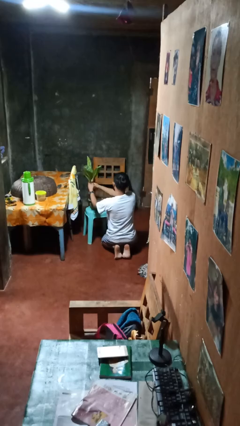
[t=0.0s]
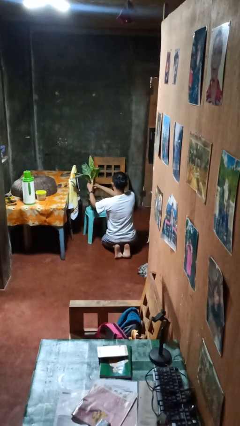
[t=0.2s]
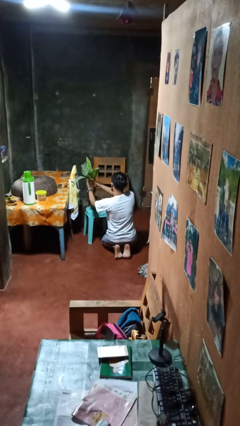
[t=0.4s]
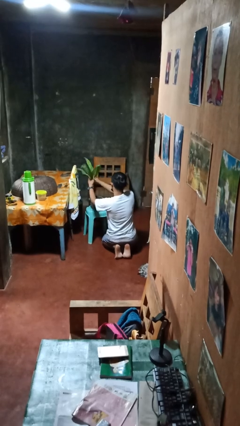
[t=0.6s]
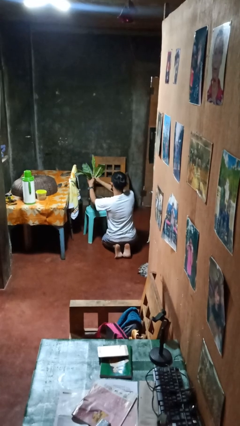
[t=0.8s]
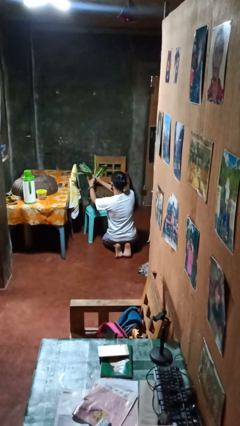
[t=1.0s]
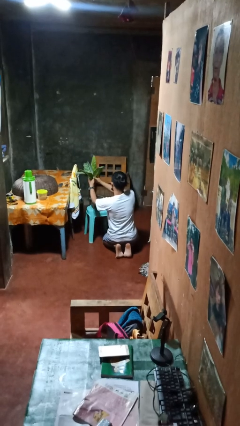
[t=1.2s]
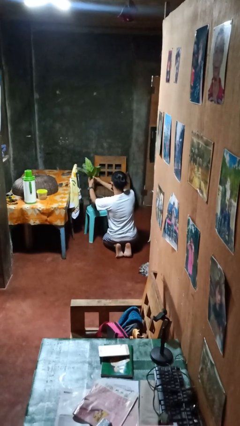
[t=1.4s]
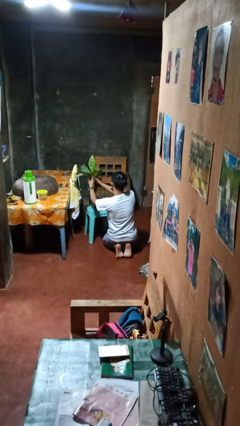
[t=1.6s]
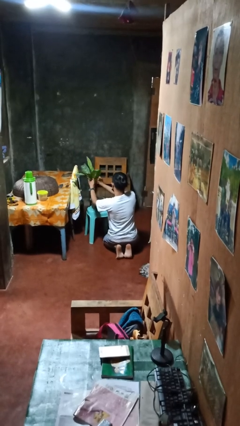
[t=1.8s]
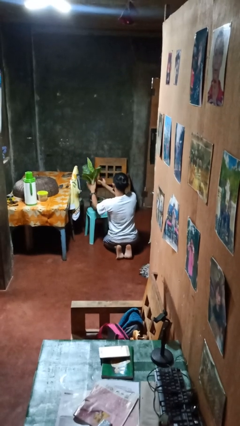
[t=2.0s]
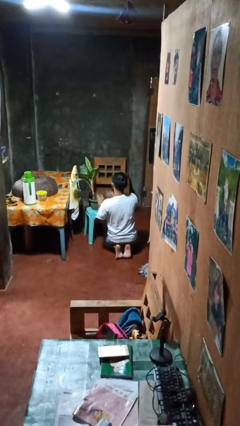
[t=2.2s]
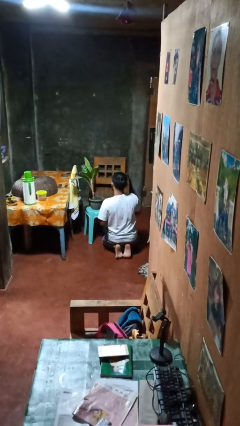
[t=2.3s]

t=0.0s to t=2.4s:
person arranges flowers in vase

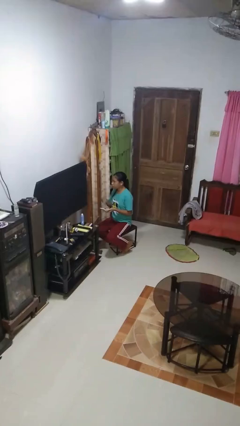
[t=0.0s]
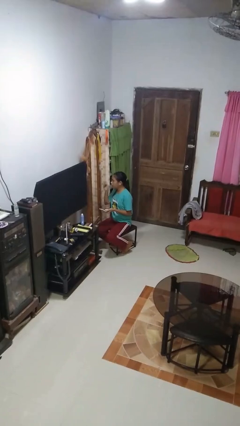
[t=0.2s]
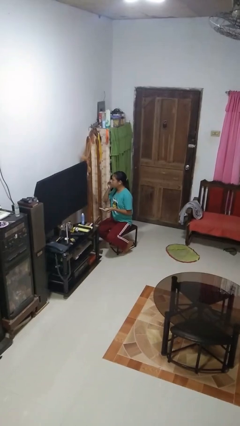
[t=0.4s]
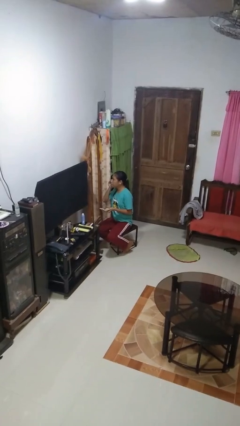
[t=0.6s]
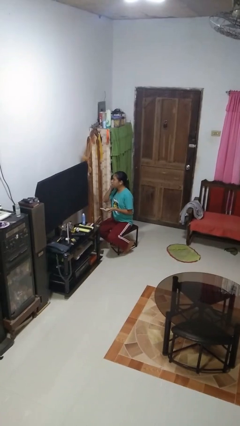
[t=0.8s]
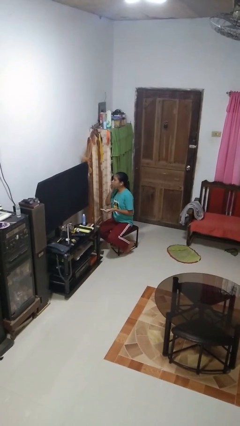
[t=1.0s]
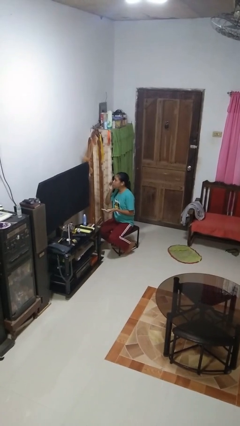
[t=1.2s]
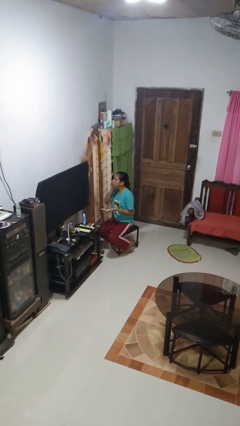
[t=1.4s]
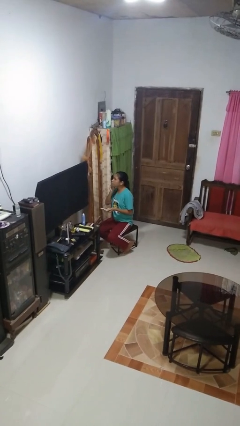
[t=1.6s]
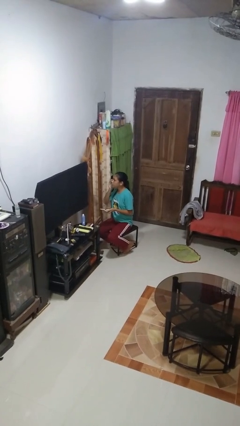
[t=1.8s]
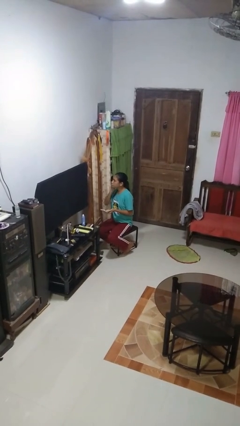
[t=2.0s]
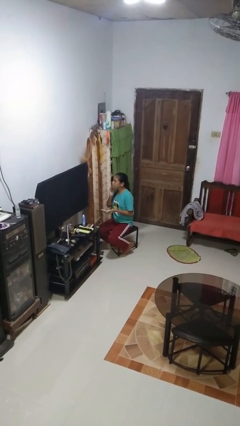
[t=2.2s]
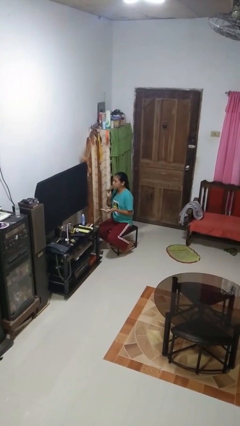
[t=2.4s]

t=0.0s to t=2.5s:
person applies foundation makeup

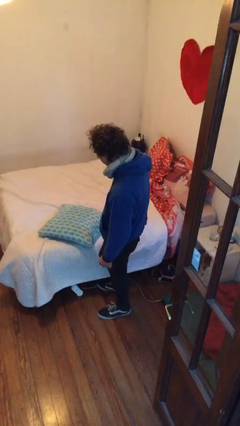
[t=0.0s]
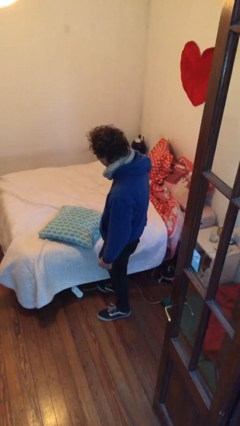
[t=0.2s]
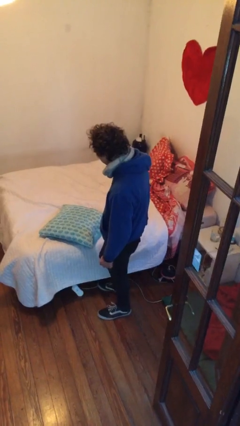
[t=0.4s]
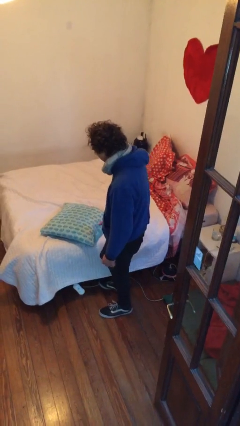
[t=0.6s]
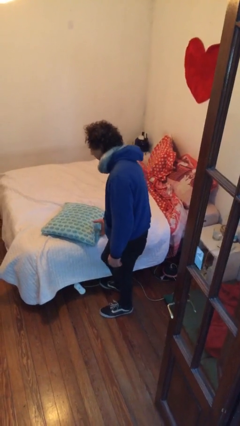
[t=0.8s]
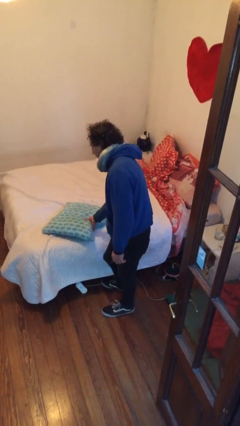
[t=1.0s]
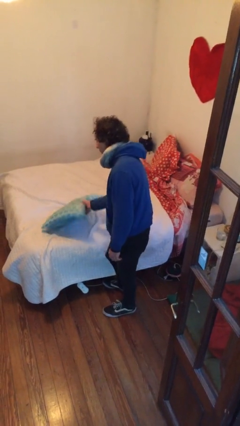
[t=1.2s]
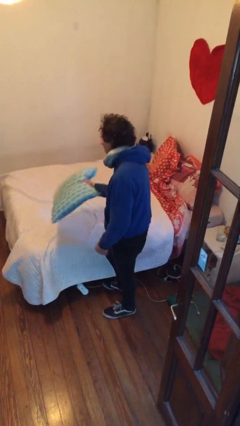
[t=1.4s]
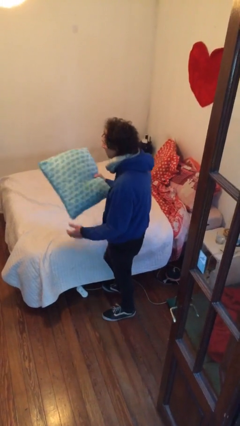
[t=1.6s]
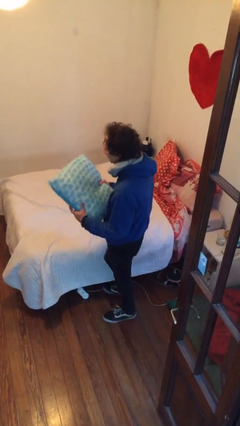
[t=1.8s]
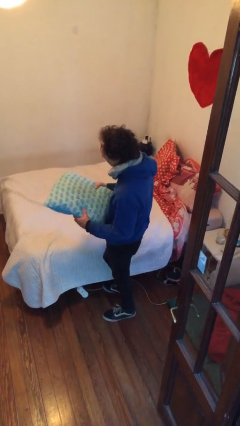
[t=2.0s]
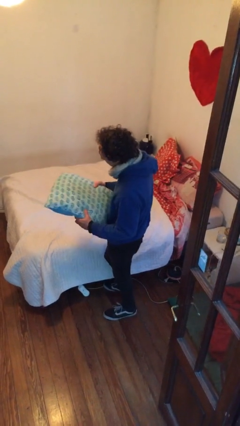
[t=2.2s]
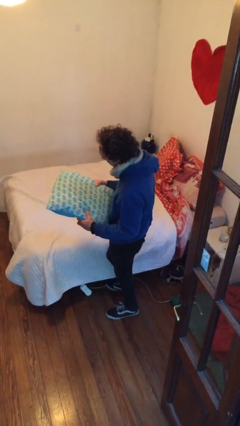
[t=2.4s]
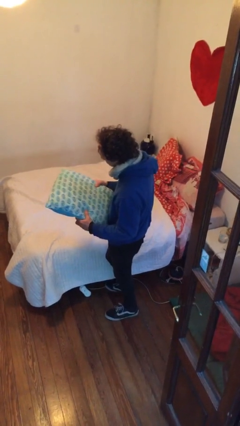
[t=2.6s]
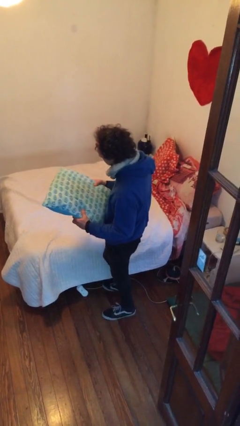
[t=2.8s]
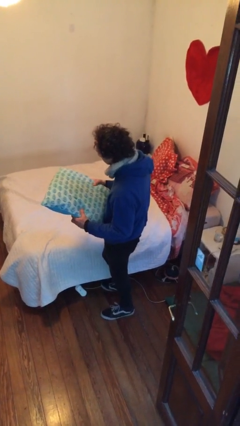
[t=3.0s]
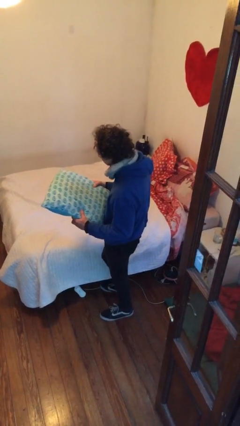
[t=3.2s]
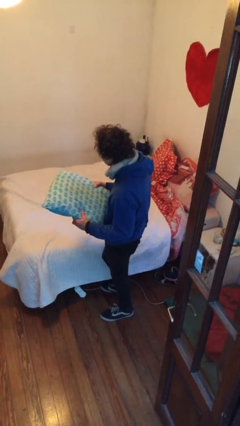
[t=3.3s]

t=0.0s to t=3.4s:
person picks up object from bed

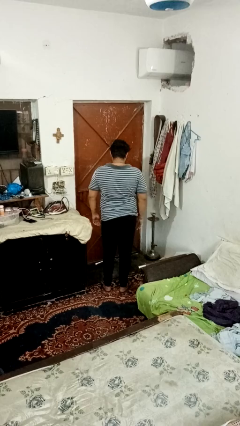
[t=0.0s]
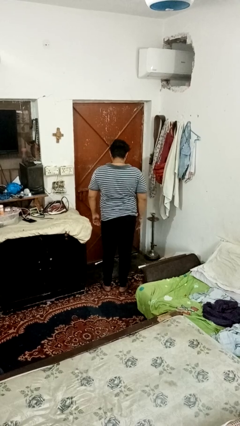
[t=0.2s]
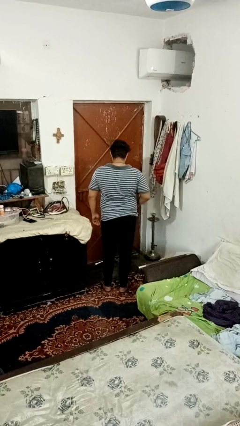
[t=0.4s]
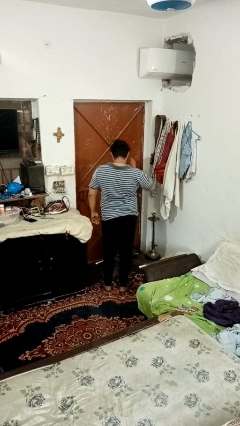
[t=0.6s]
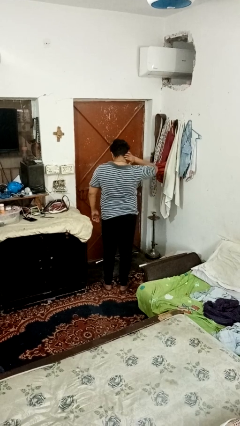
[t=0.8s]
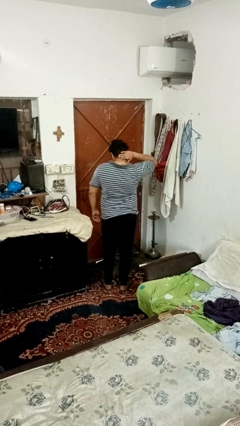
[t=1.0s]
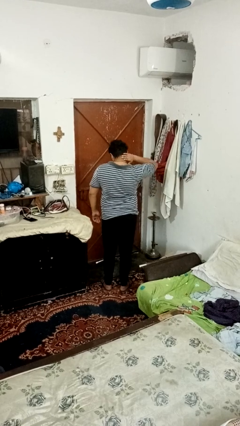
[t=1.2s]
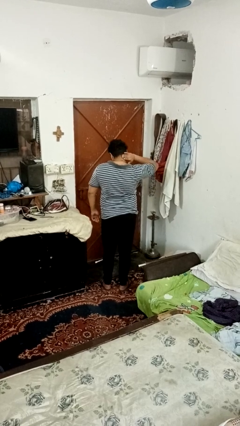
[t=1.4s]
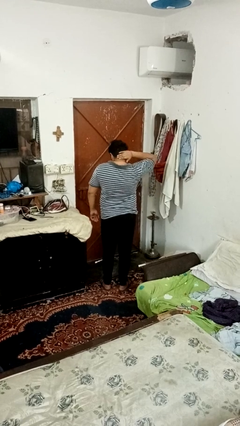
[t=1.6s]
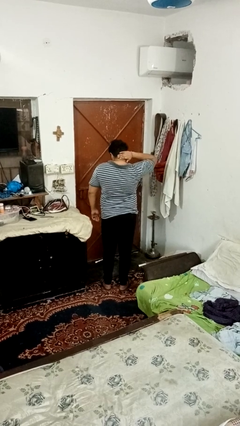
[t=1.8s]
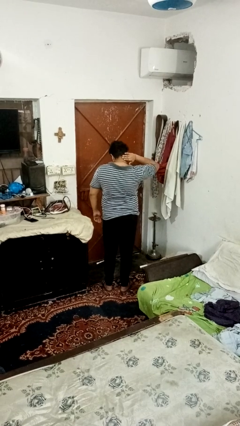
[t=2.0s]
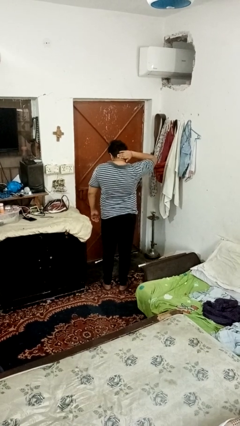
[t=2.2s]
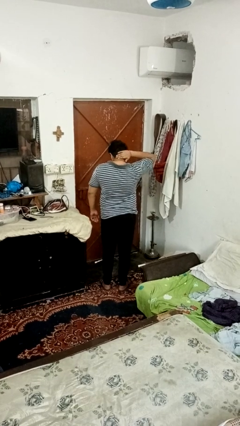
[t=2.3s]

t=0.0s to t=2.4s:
person rubs neck

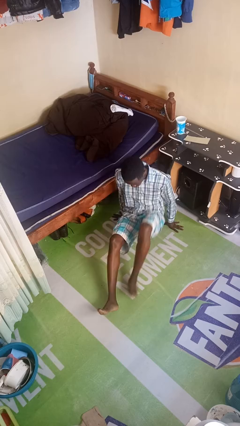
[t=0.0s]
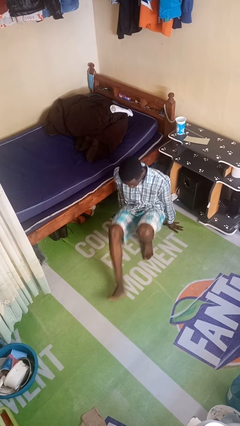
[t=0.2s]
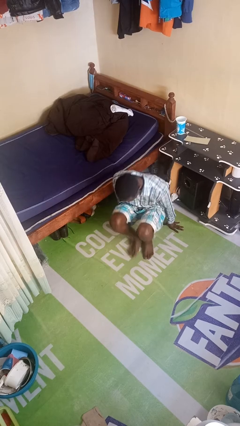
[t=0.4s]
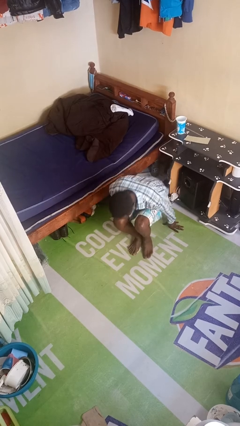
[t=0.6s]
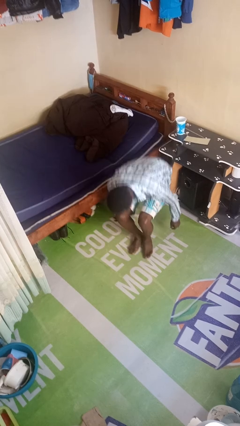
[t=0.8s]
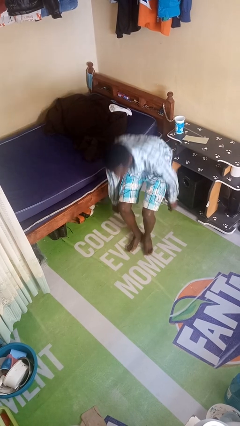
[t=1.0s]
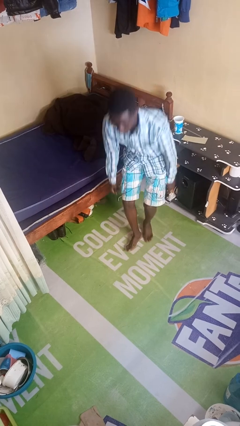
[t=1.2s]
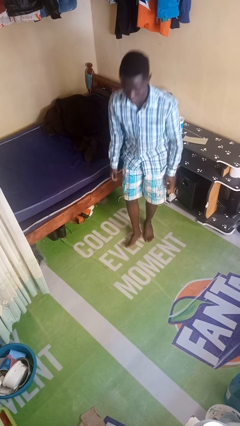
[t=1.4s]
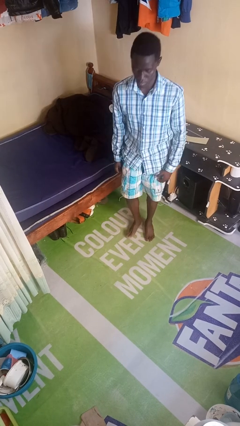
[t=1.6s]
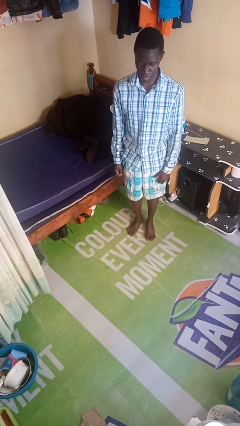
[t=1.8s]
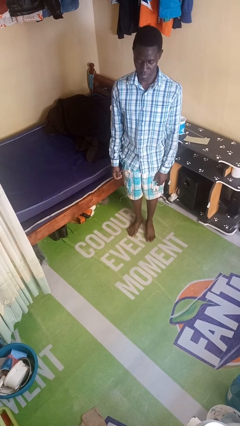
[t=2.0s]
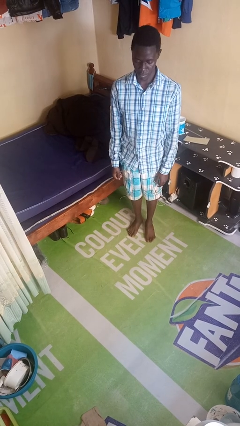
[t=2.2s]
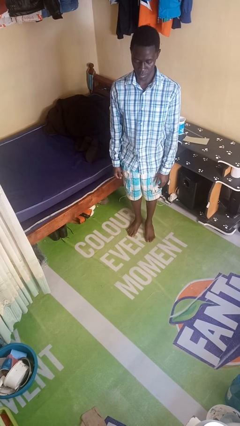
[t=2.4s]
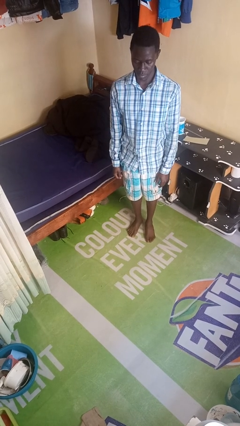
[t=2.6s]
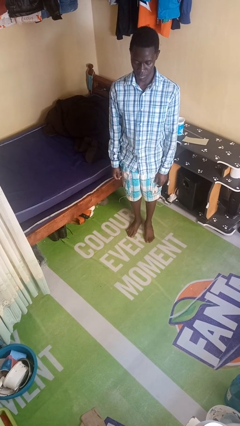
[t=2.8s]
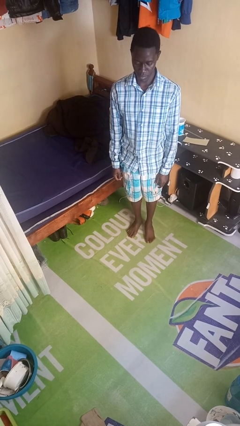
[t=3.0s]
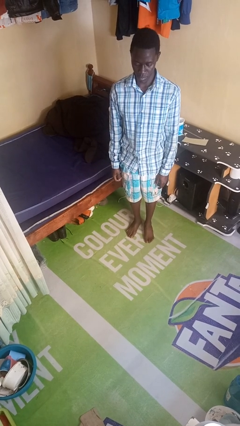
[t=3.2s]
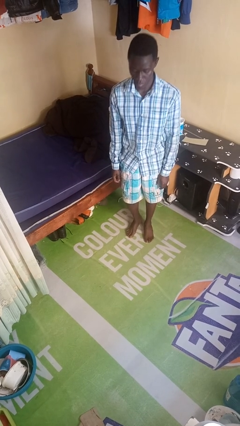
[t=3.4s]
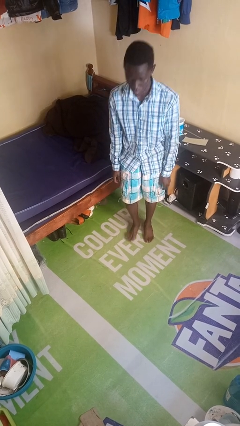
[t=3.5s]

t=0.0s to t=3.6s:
person stands up from floor

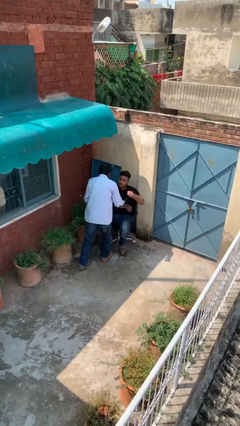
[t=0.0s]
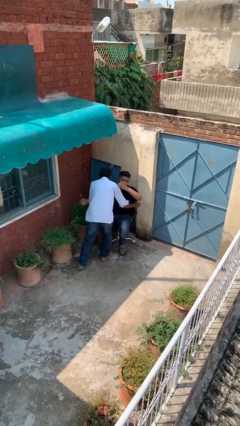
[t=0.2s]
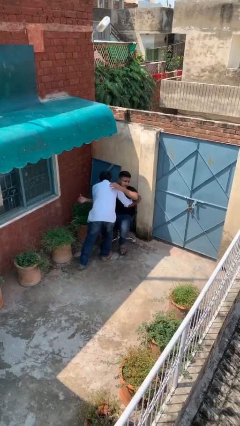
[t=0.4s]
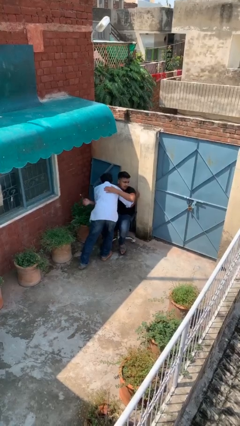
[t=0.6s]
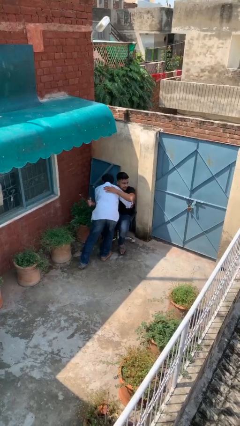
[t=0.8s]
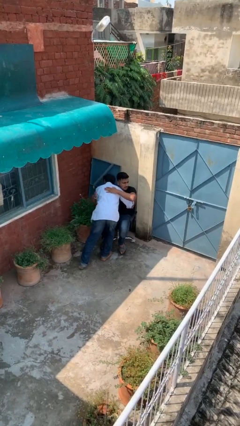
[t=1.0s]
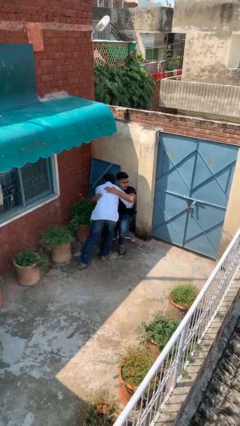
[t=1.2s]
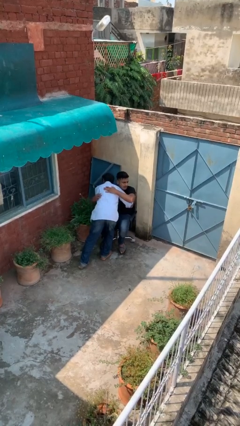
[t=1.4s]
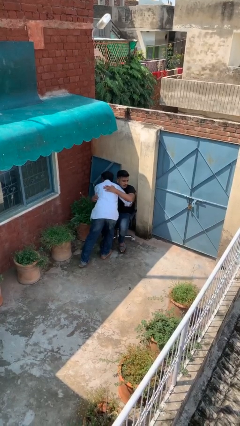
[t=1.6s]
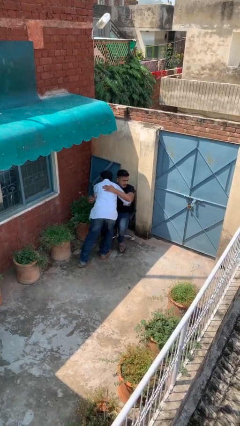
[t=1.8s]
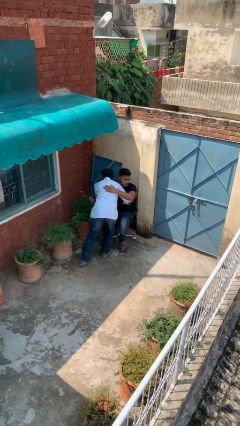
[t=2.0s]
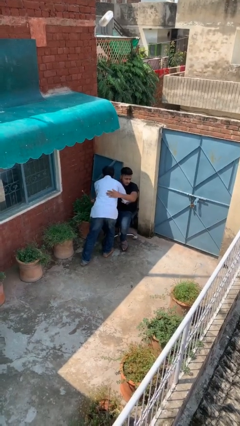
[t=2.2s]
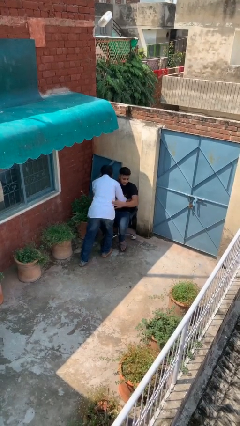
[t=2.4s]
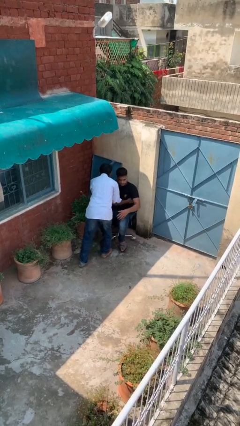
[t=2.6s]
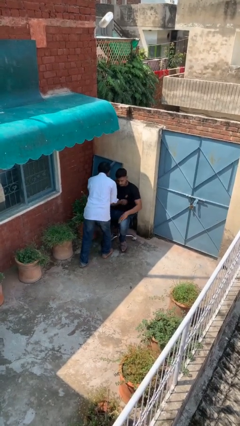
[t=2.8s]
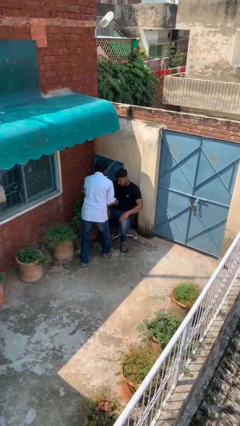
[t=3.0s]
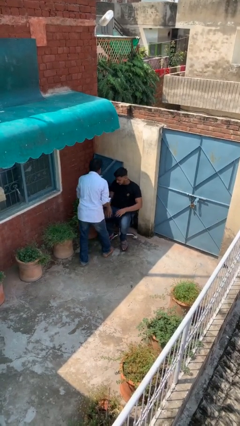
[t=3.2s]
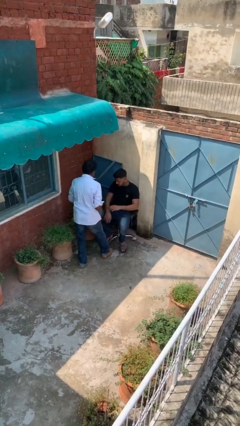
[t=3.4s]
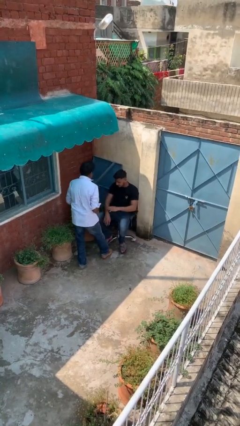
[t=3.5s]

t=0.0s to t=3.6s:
person embraces person
